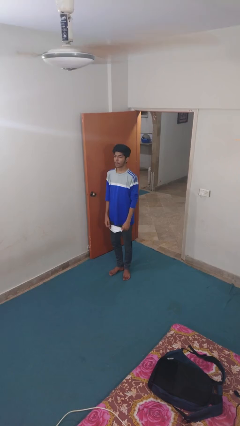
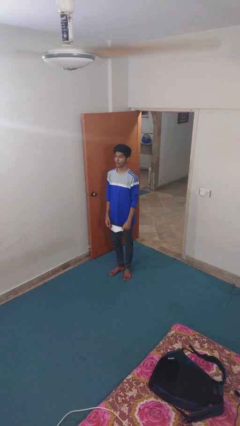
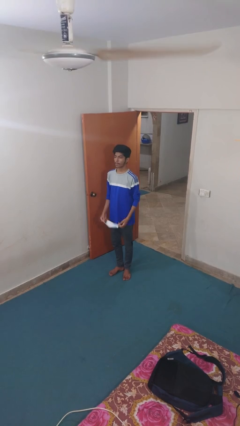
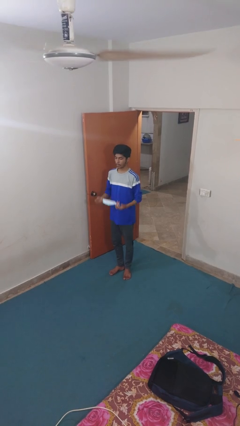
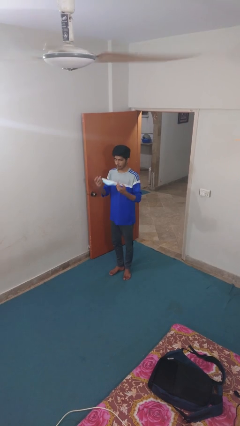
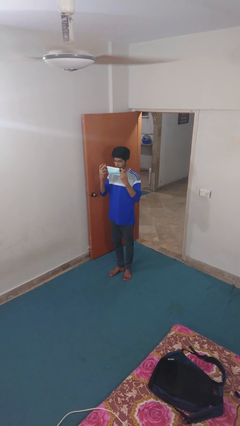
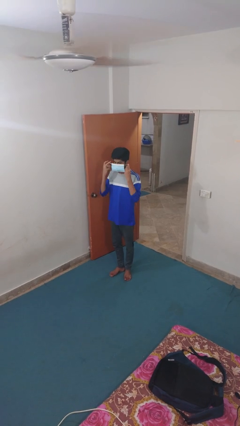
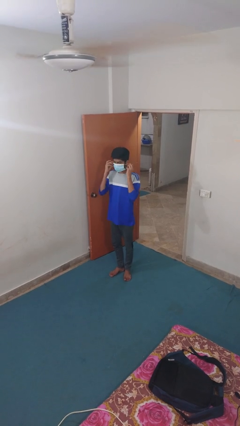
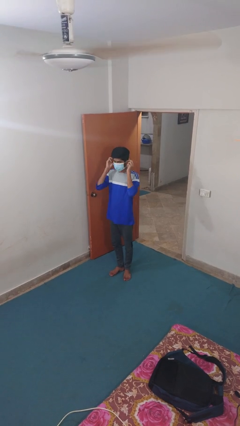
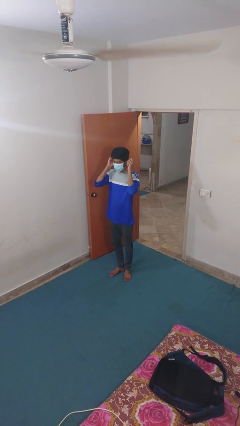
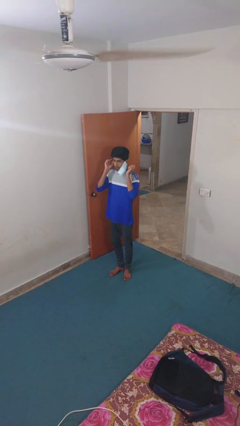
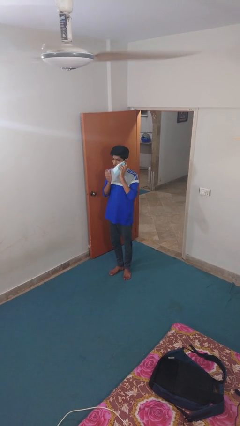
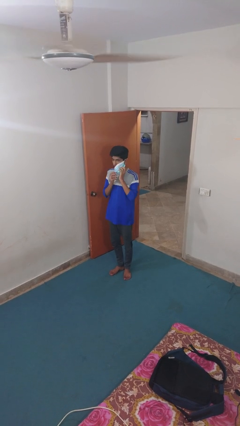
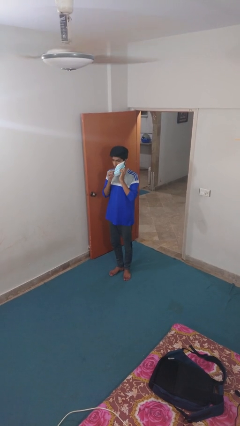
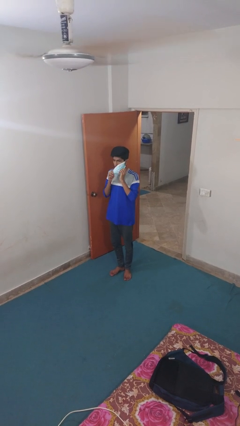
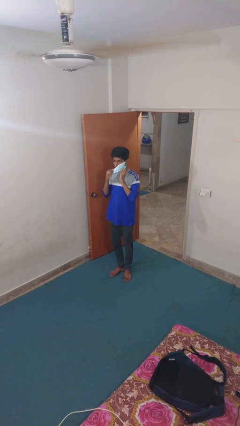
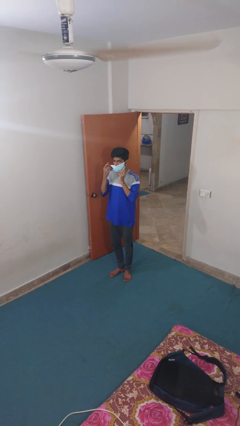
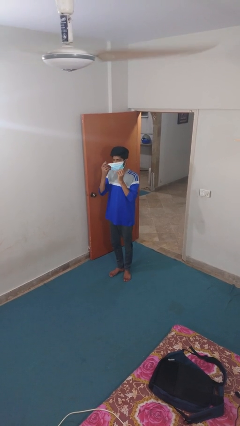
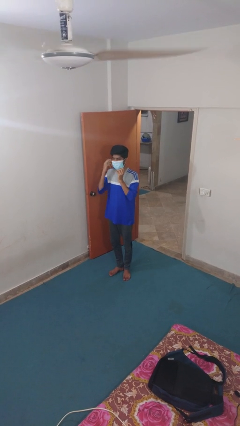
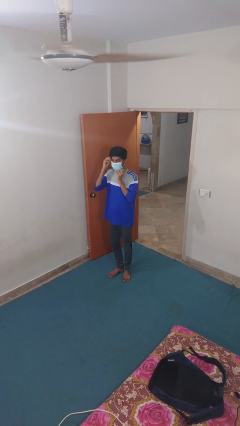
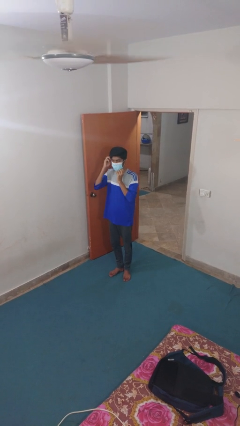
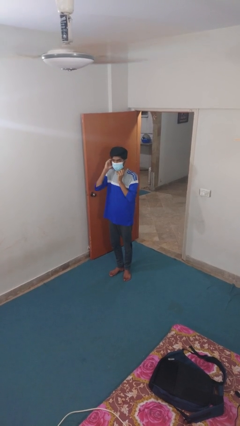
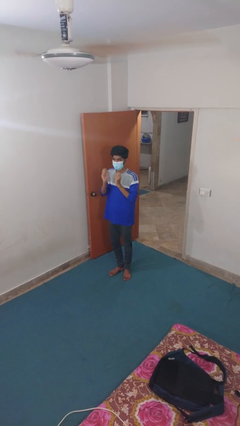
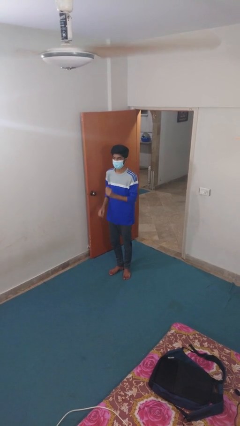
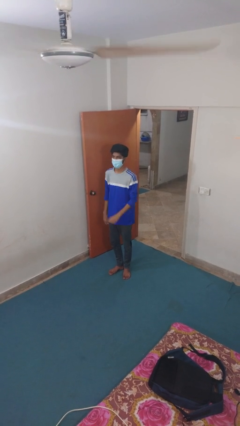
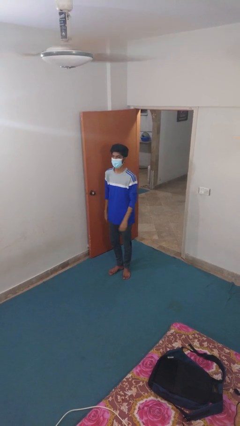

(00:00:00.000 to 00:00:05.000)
person puts on facemask

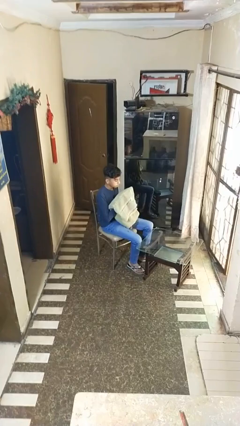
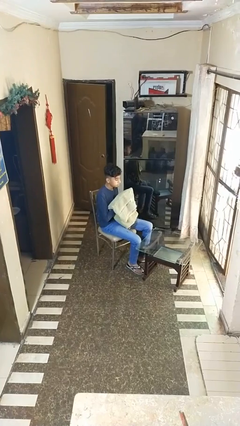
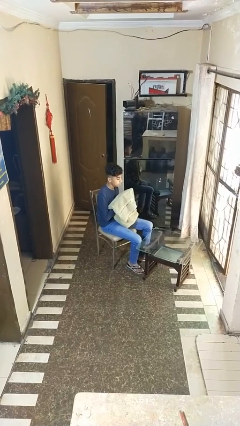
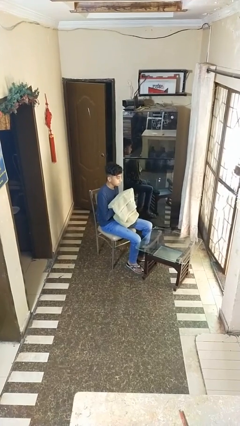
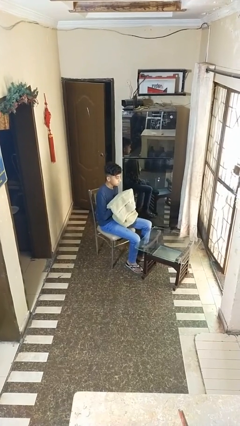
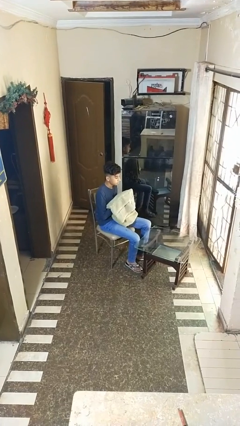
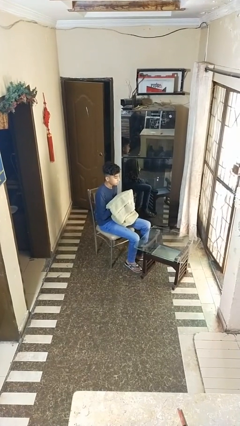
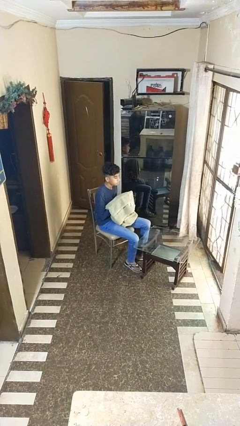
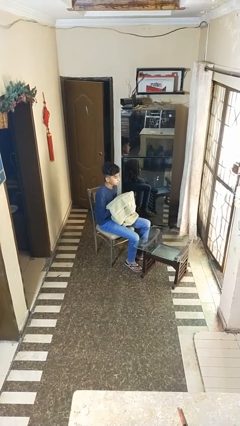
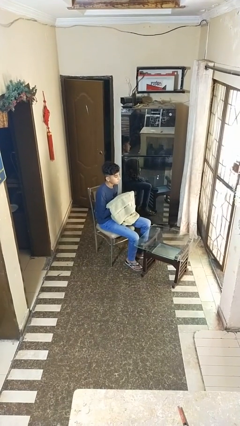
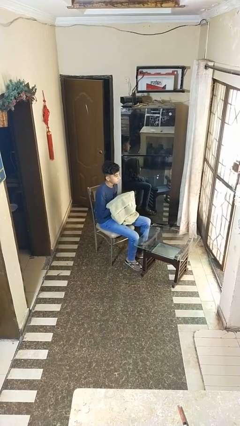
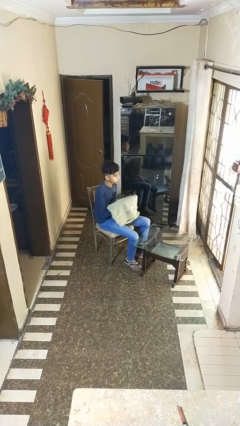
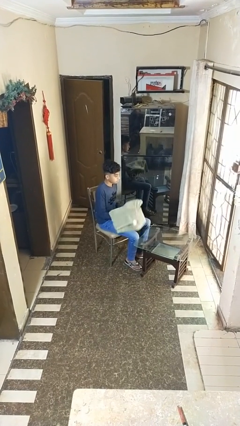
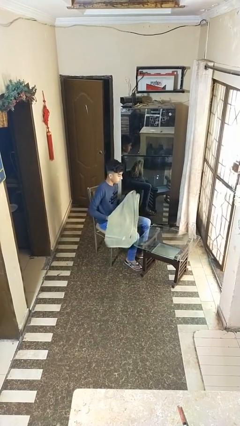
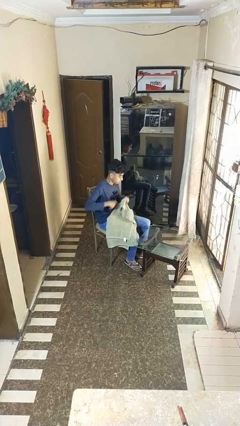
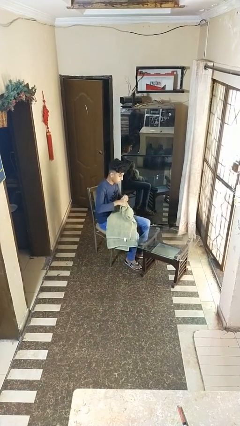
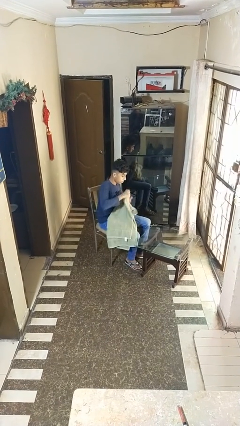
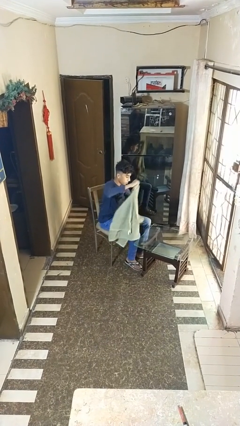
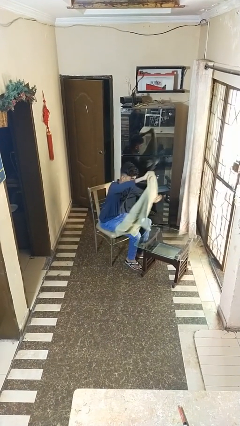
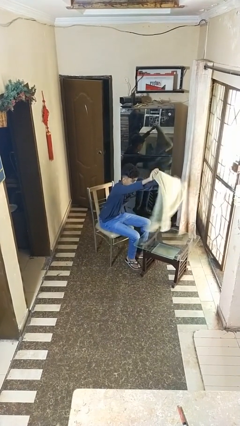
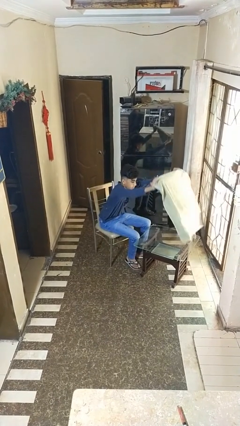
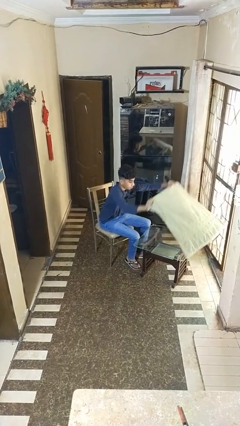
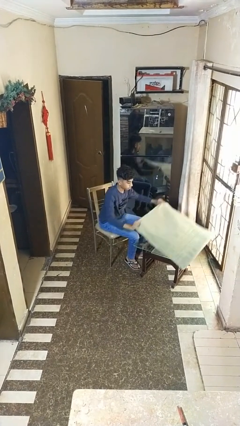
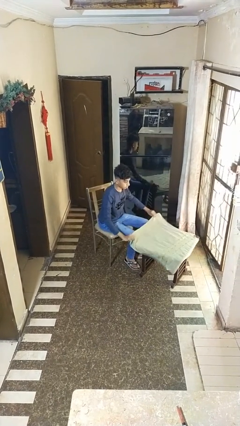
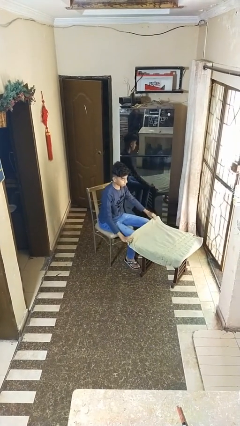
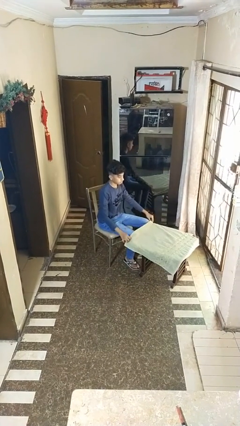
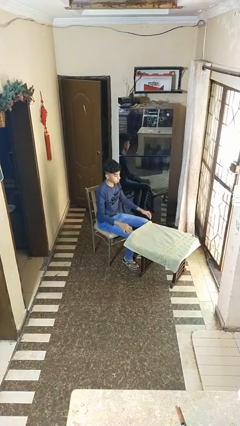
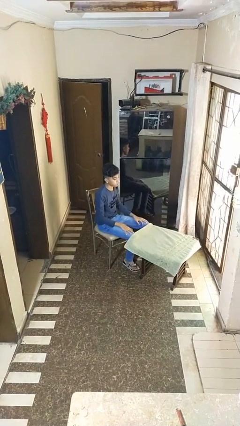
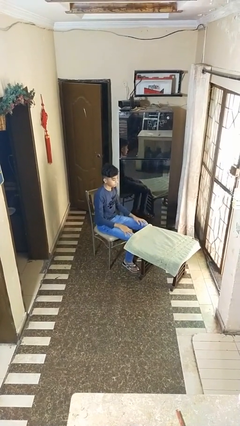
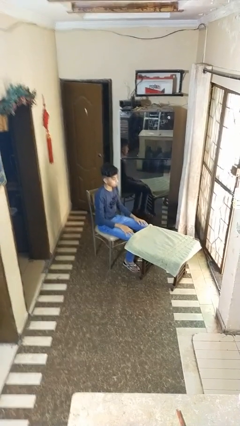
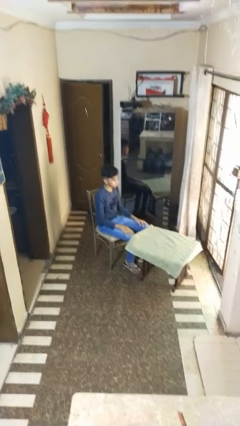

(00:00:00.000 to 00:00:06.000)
person spreads tablecloth

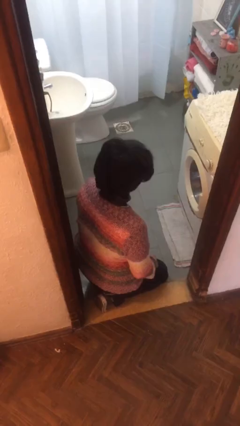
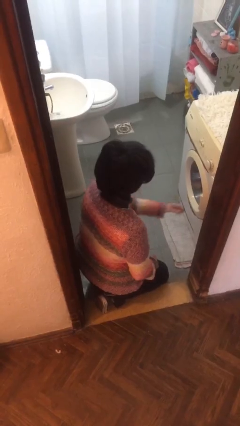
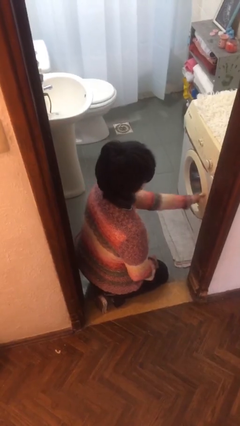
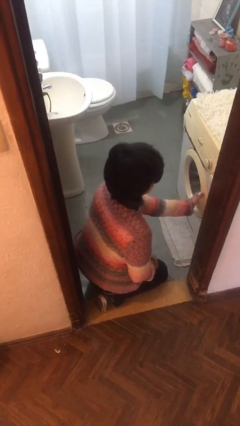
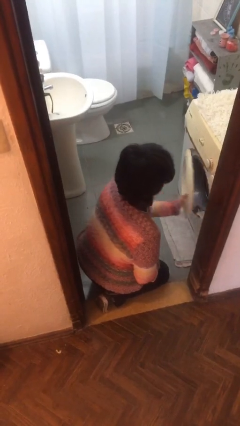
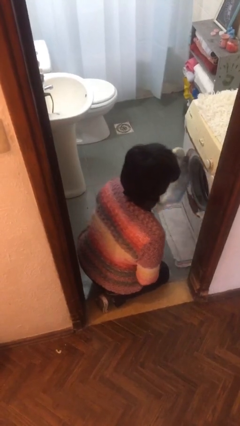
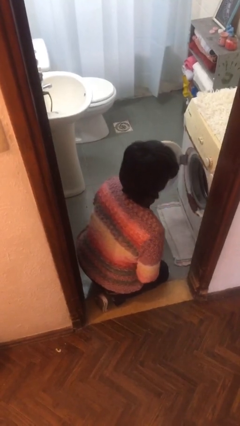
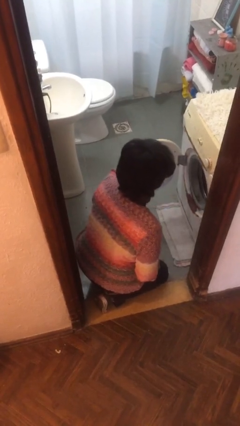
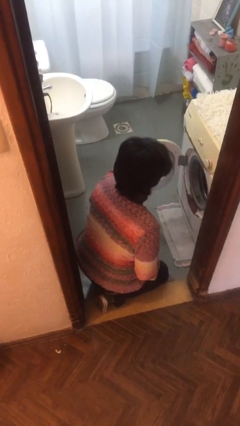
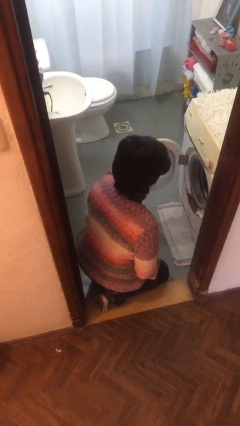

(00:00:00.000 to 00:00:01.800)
person opens clothes washer

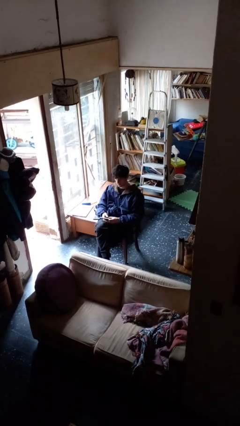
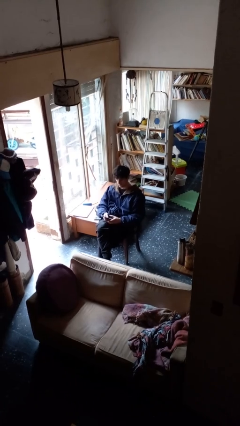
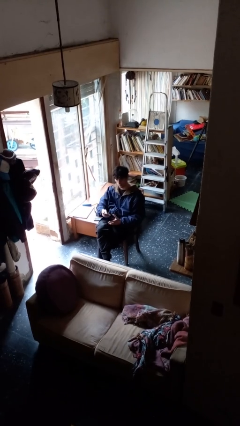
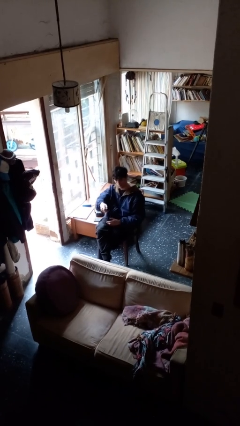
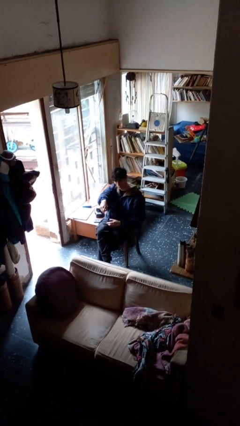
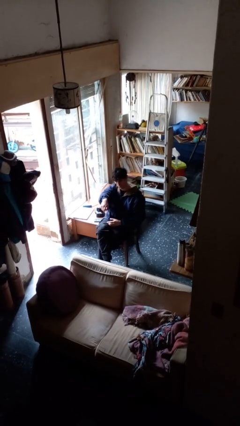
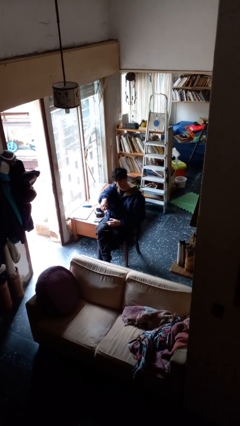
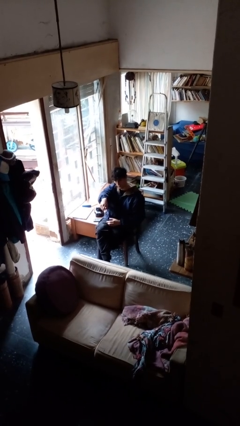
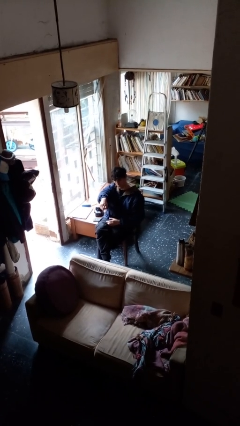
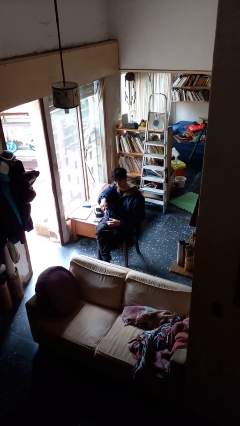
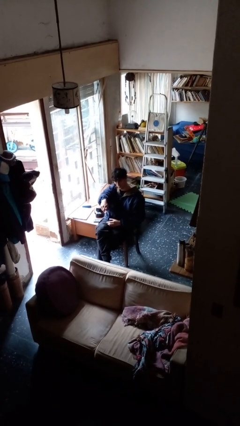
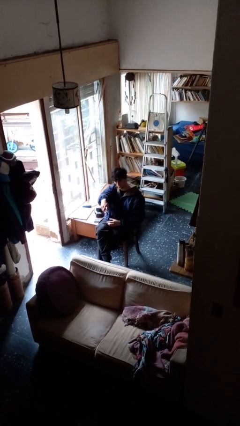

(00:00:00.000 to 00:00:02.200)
person uses television remote

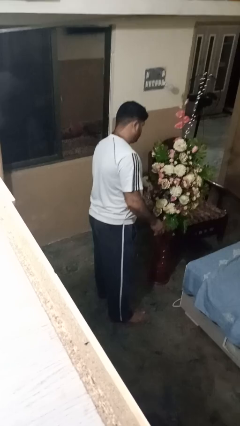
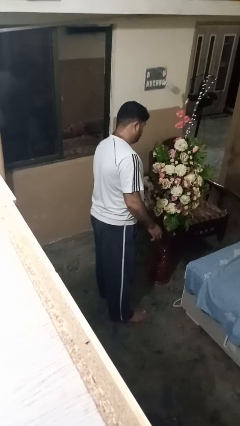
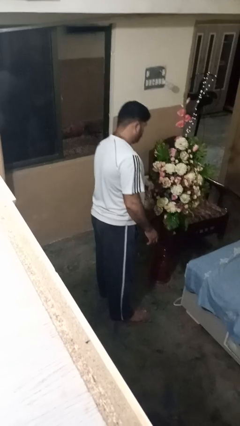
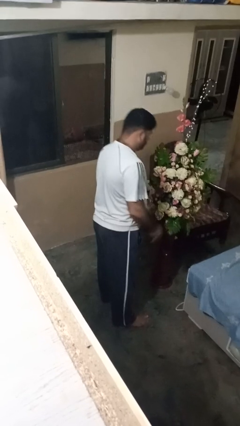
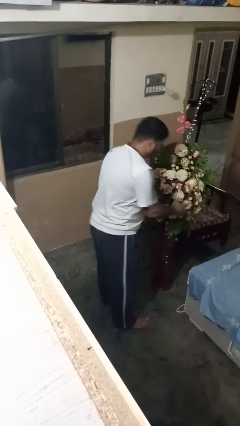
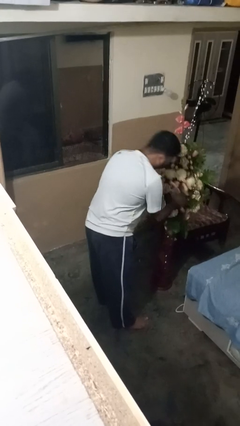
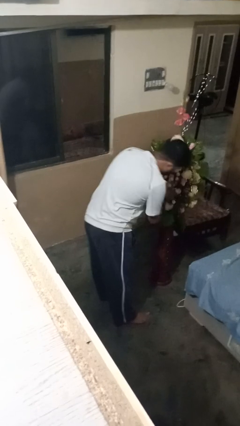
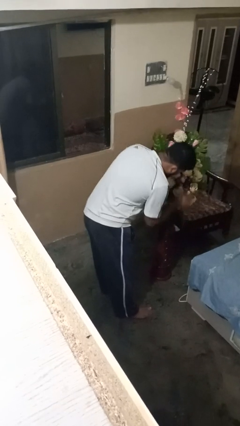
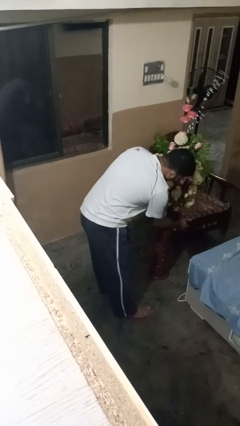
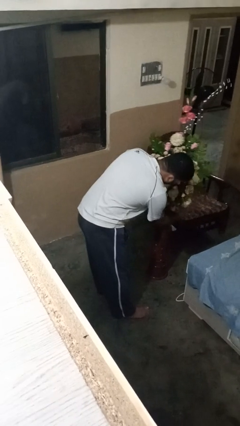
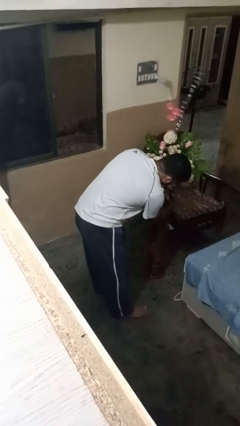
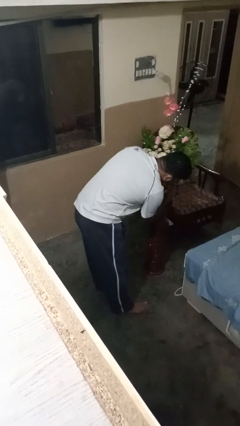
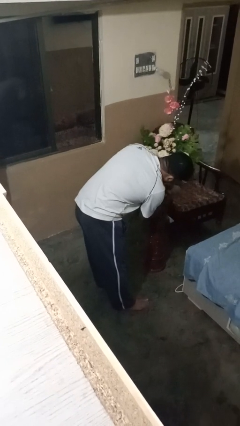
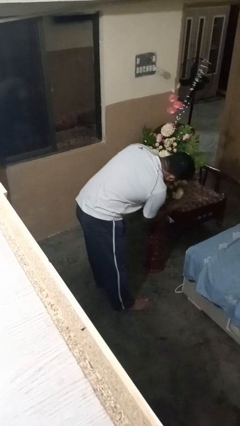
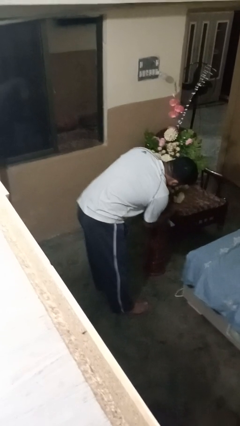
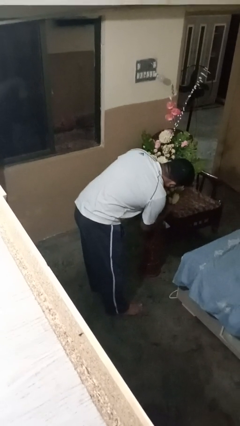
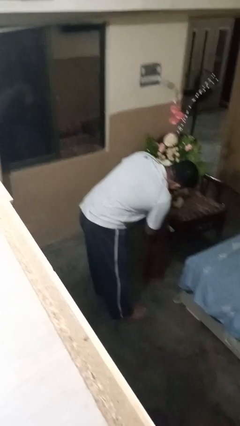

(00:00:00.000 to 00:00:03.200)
person arranges flowers in vase
